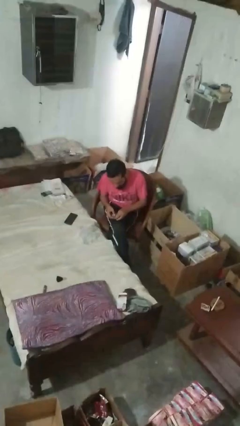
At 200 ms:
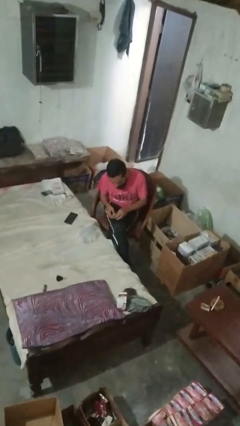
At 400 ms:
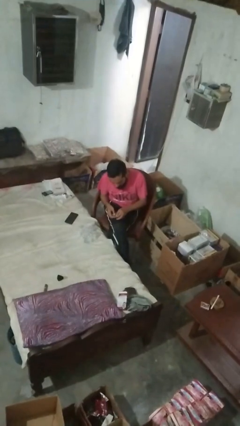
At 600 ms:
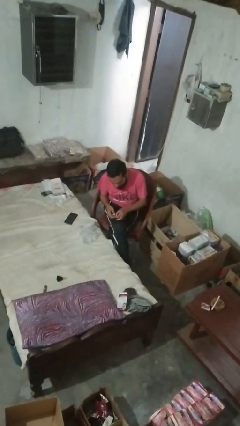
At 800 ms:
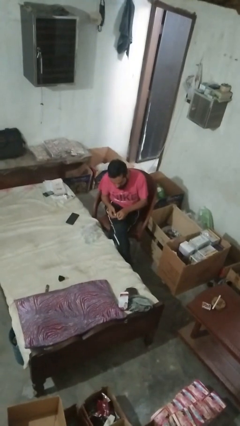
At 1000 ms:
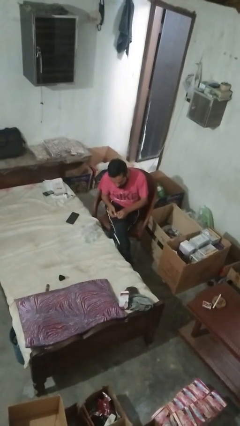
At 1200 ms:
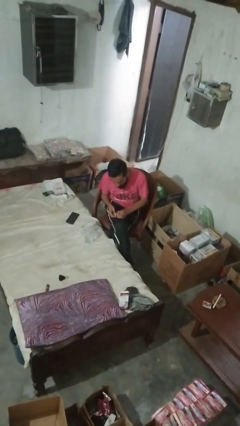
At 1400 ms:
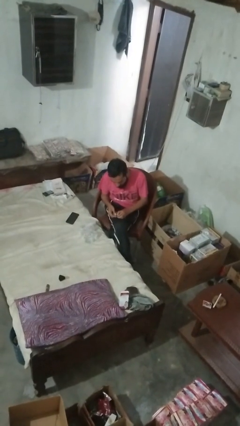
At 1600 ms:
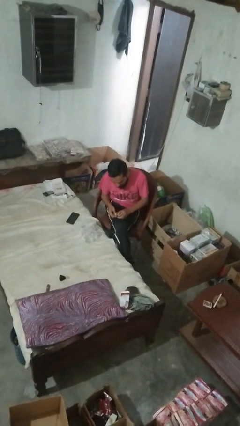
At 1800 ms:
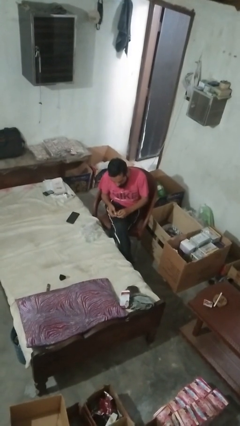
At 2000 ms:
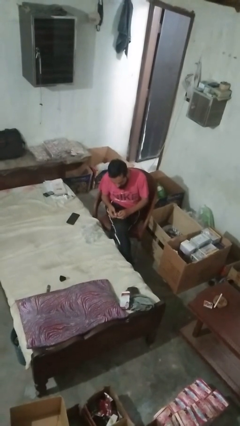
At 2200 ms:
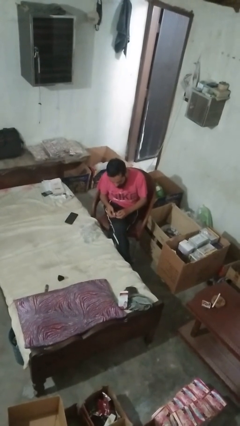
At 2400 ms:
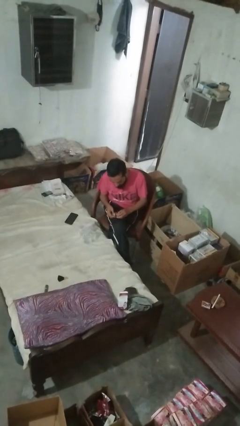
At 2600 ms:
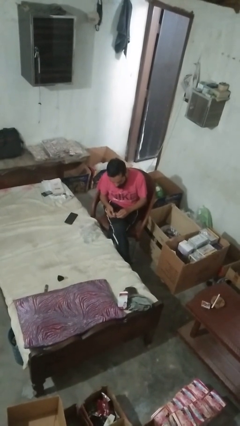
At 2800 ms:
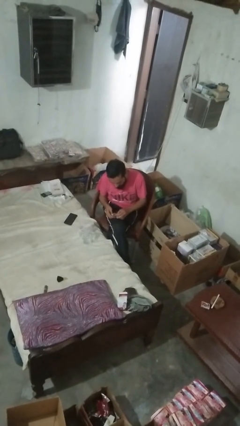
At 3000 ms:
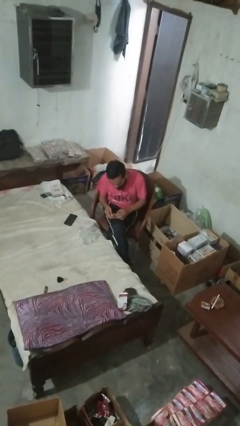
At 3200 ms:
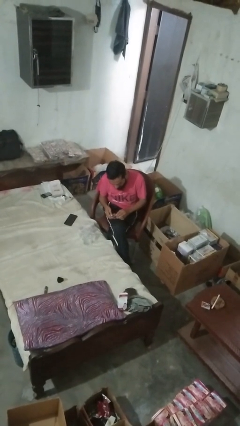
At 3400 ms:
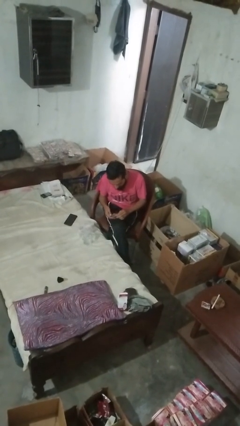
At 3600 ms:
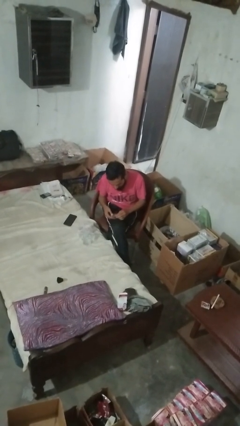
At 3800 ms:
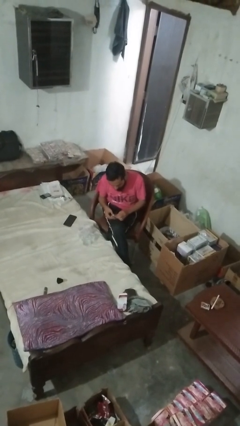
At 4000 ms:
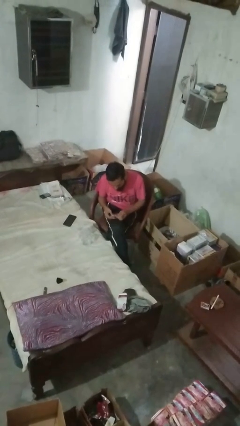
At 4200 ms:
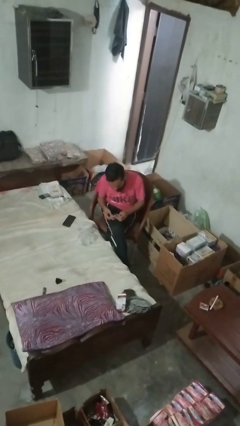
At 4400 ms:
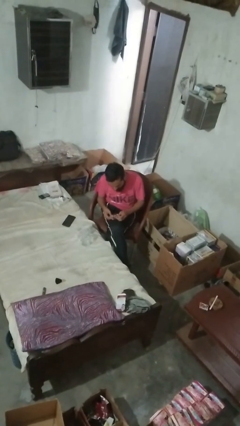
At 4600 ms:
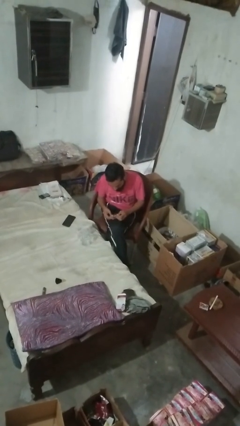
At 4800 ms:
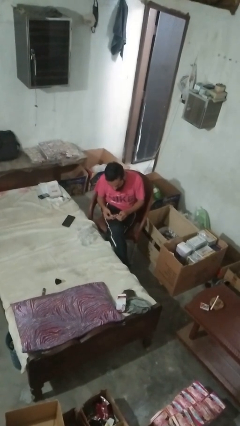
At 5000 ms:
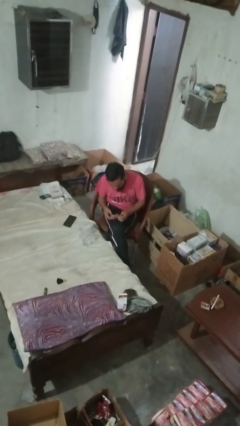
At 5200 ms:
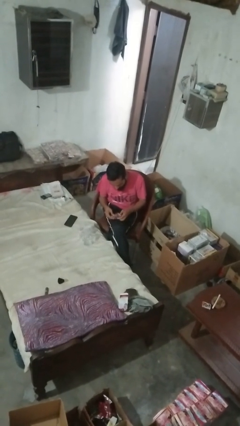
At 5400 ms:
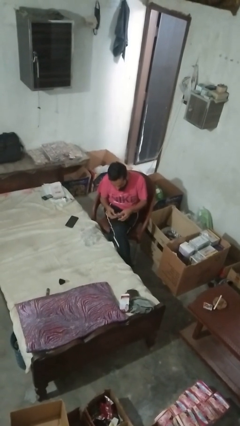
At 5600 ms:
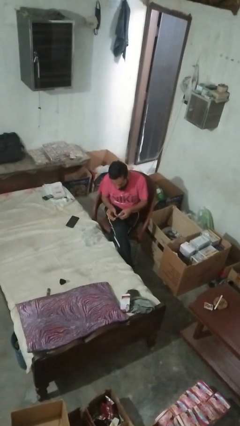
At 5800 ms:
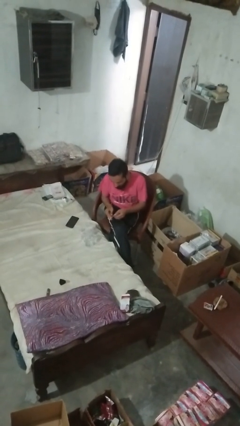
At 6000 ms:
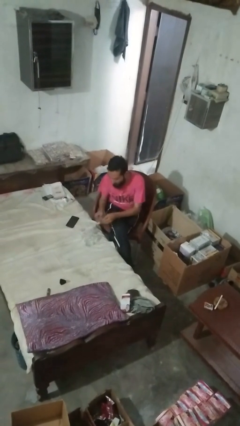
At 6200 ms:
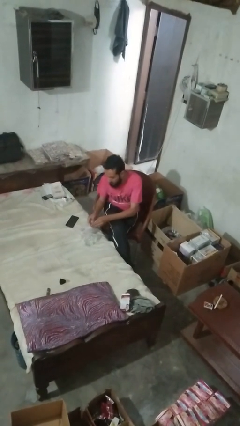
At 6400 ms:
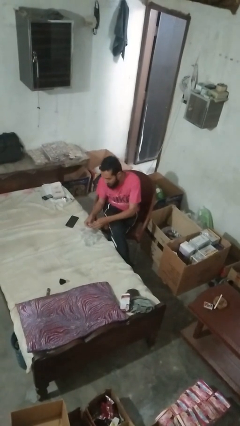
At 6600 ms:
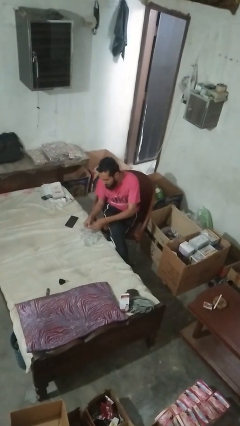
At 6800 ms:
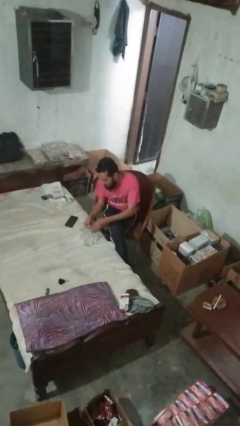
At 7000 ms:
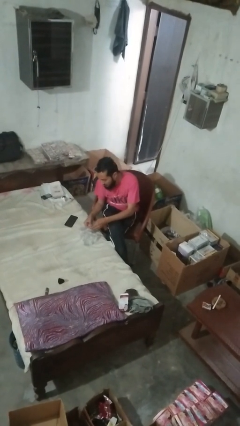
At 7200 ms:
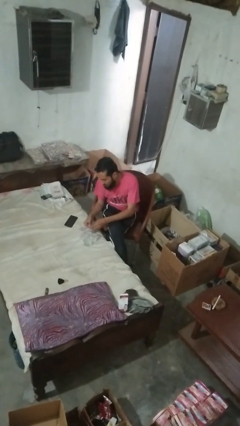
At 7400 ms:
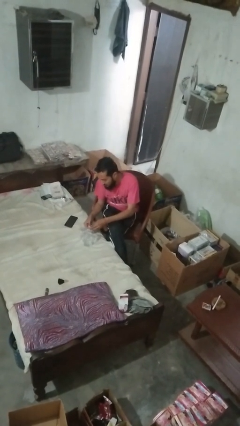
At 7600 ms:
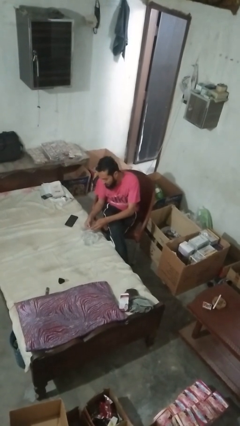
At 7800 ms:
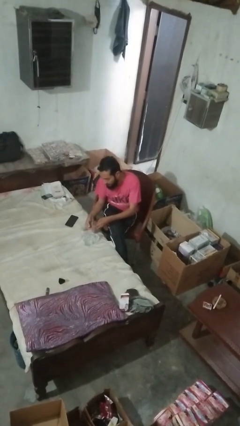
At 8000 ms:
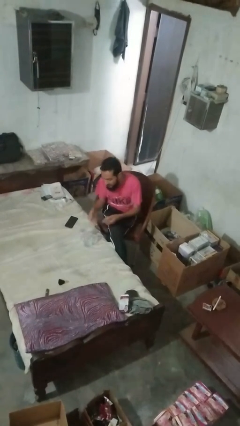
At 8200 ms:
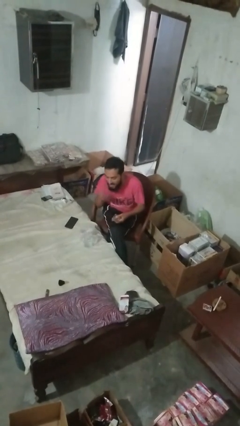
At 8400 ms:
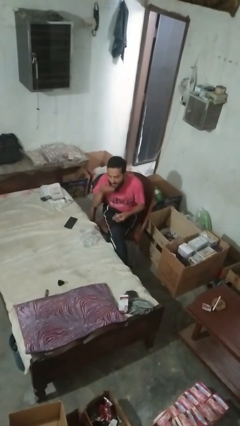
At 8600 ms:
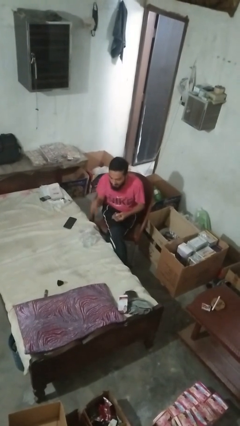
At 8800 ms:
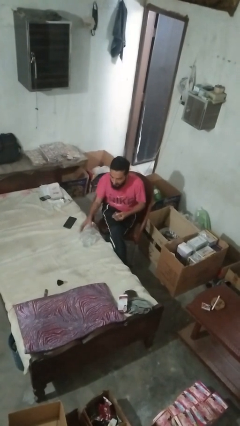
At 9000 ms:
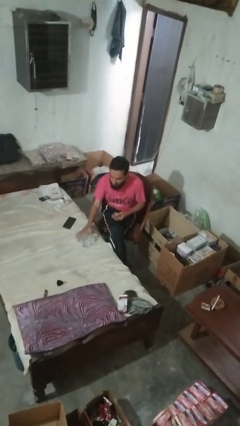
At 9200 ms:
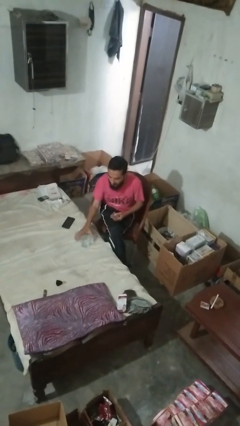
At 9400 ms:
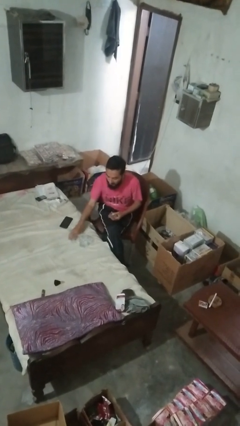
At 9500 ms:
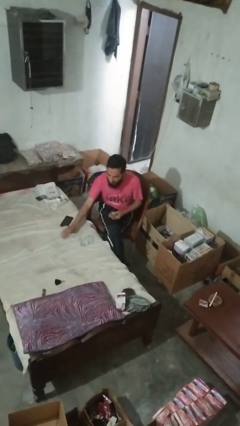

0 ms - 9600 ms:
person takes medicine pills

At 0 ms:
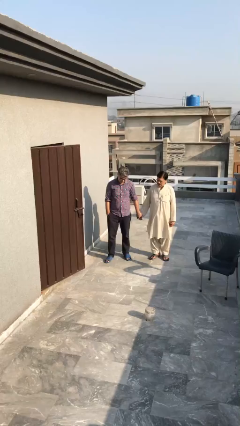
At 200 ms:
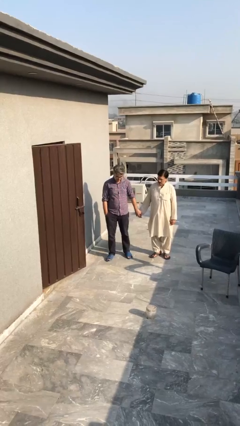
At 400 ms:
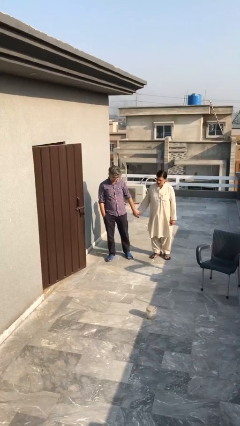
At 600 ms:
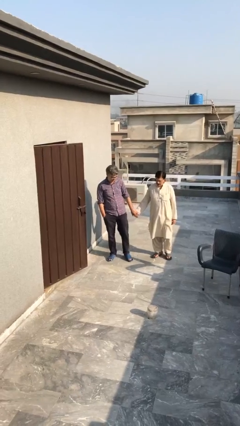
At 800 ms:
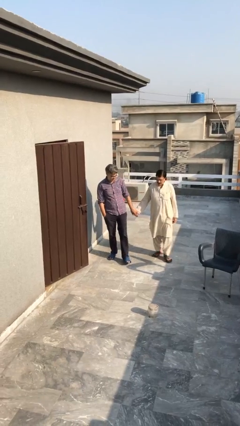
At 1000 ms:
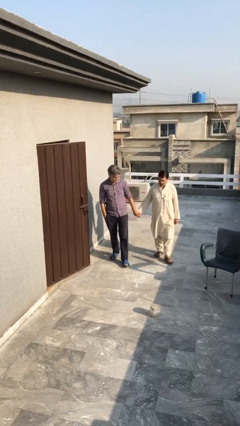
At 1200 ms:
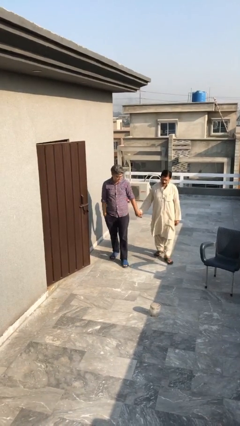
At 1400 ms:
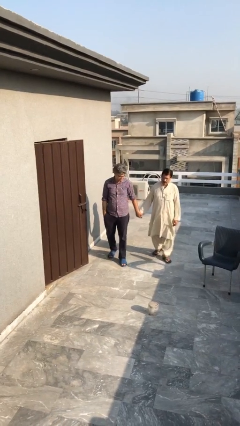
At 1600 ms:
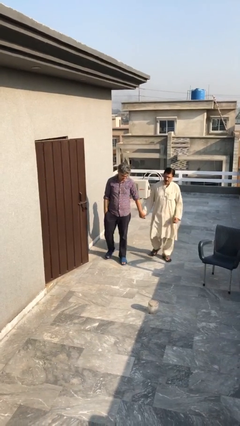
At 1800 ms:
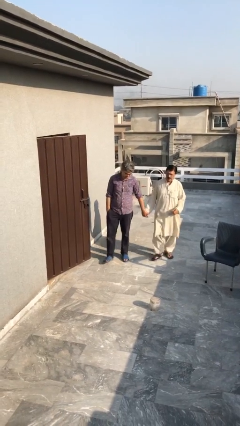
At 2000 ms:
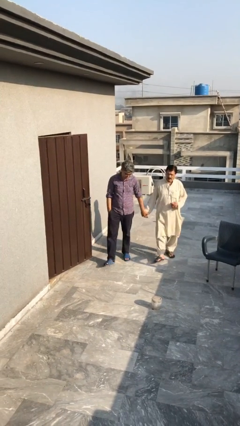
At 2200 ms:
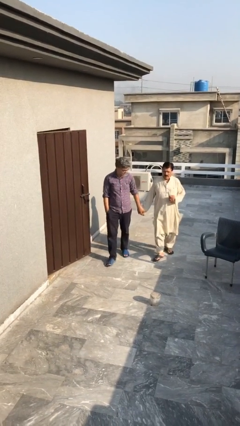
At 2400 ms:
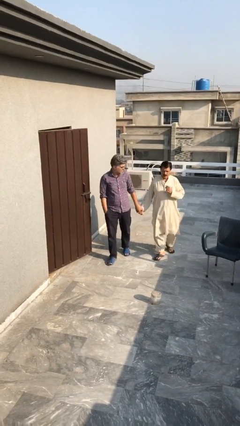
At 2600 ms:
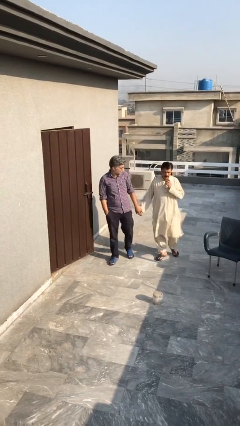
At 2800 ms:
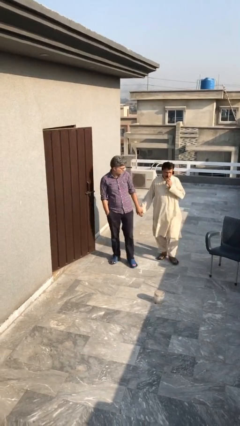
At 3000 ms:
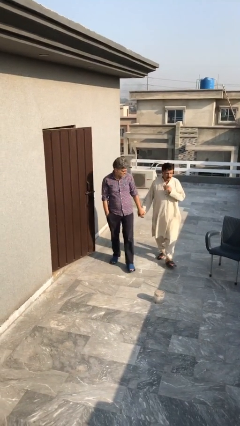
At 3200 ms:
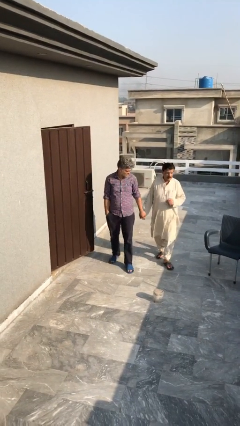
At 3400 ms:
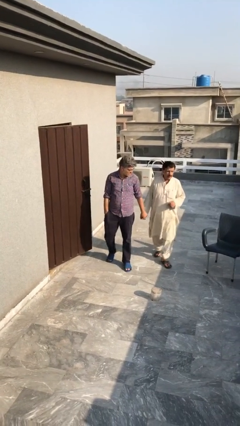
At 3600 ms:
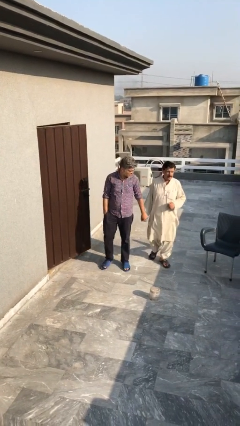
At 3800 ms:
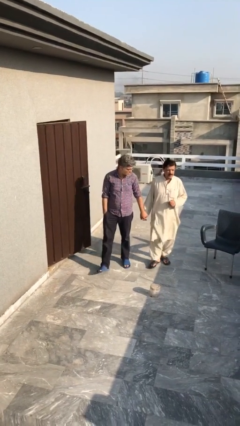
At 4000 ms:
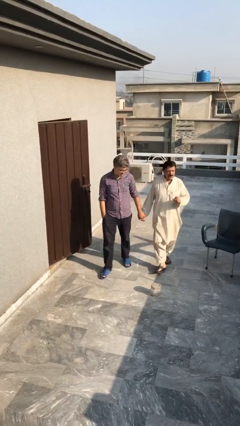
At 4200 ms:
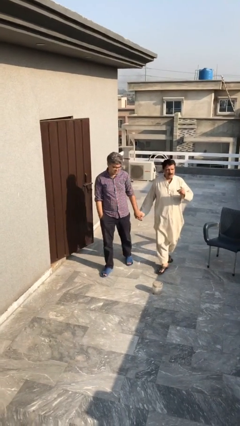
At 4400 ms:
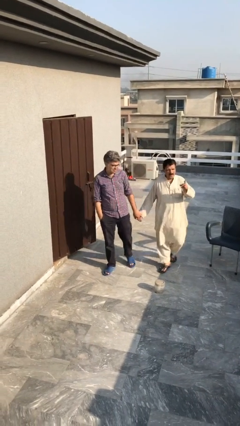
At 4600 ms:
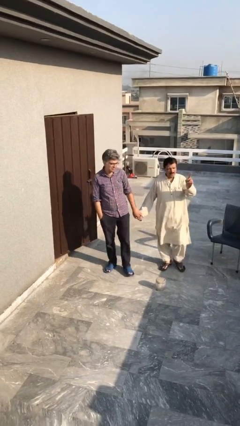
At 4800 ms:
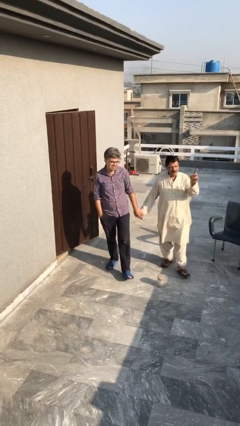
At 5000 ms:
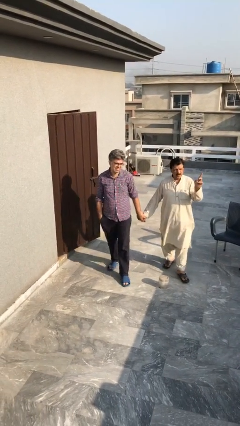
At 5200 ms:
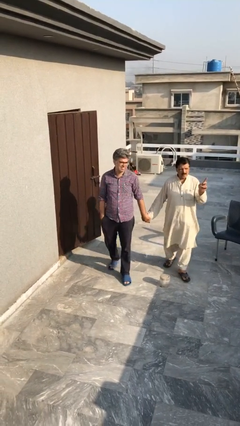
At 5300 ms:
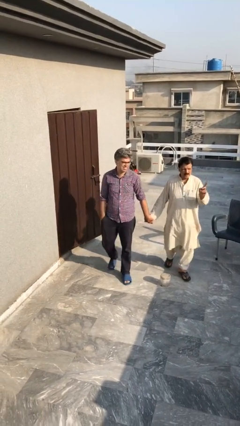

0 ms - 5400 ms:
person holds hand

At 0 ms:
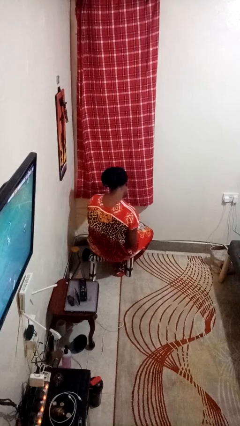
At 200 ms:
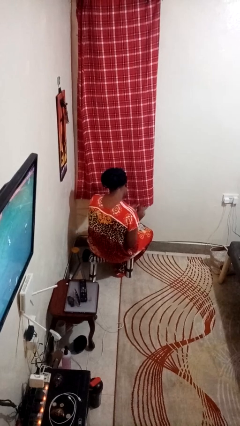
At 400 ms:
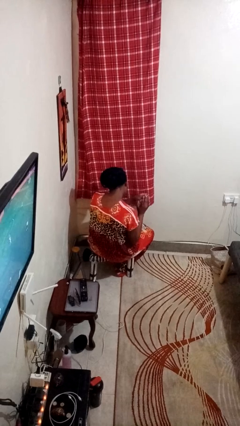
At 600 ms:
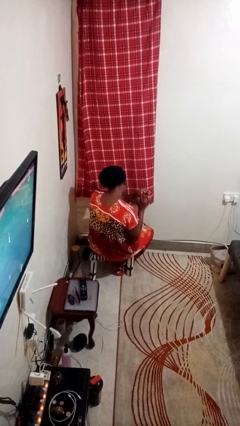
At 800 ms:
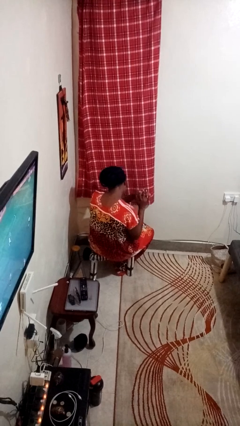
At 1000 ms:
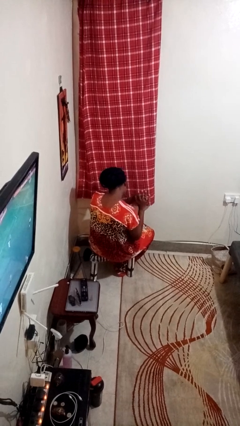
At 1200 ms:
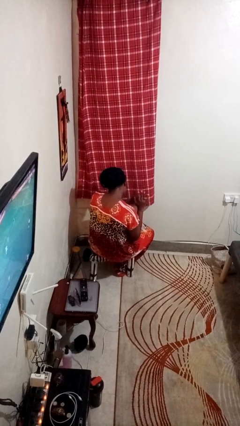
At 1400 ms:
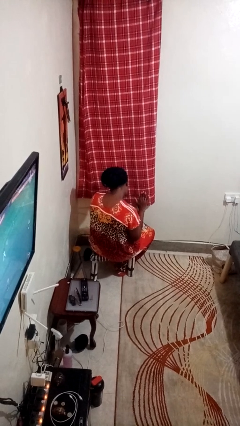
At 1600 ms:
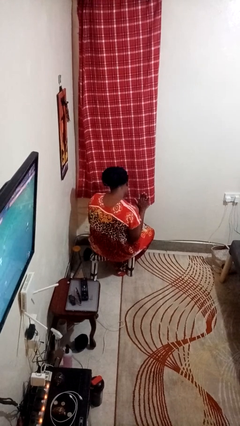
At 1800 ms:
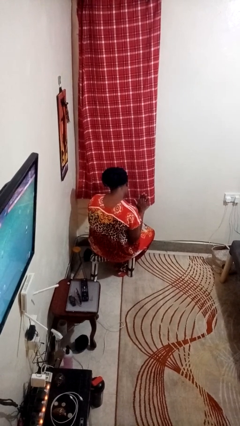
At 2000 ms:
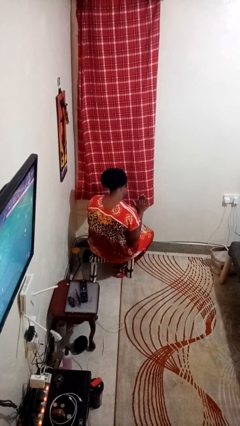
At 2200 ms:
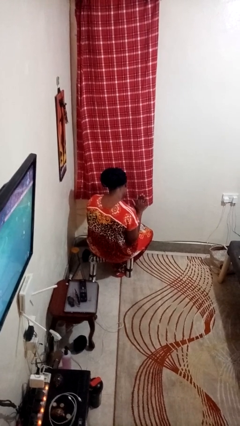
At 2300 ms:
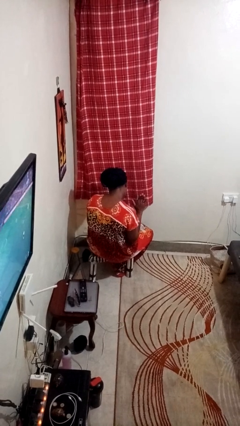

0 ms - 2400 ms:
person puts on ring

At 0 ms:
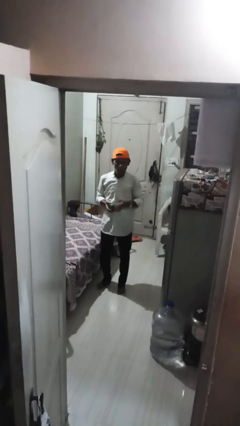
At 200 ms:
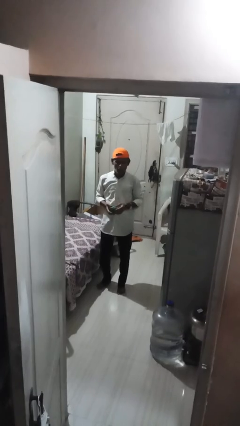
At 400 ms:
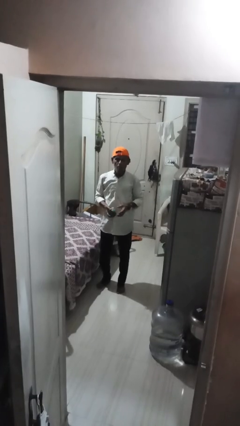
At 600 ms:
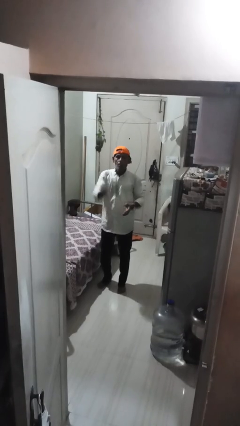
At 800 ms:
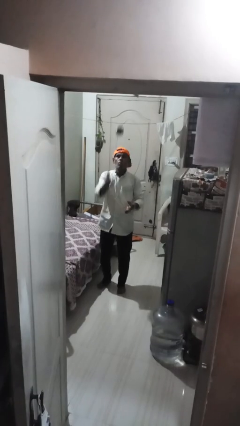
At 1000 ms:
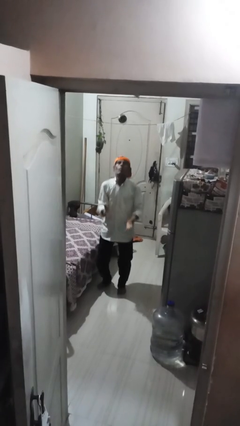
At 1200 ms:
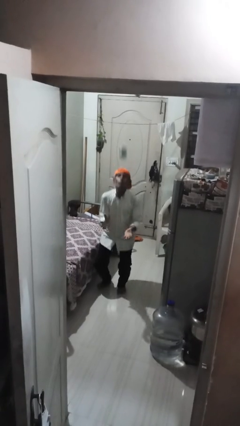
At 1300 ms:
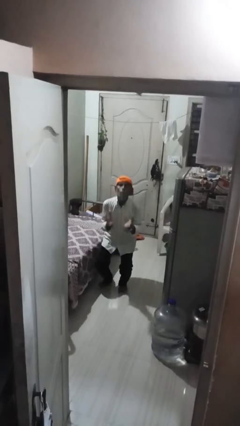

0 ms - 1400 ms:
person drops object
